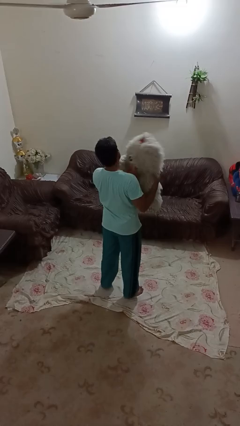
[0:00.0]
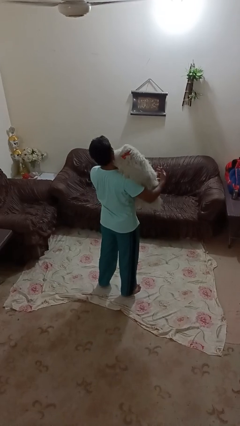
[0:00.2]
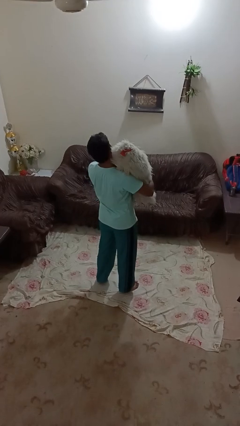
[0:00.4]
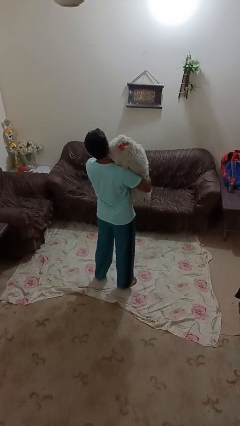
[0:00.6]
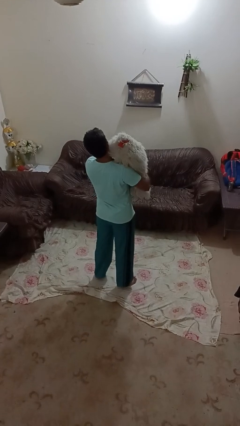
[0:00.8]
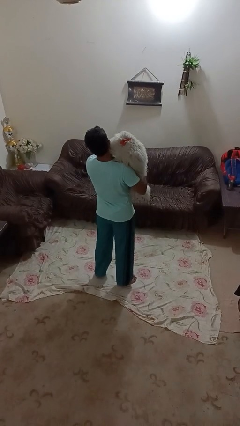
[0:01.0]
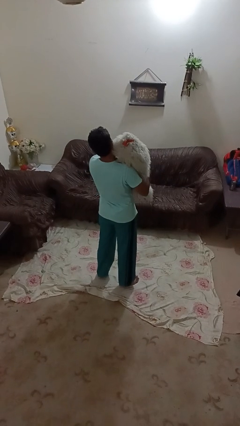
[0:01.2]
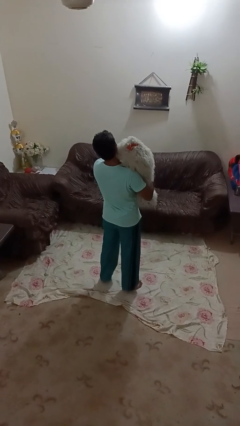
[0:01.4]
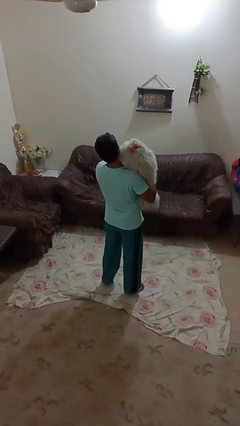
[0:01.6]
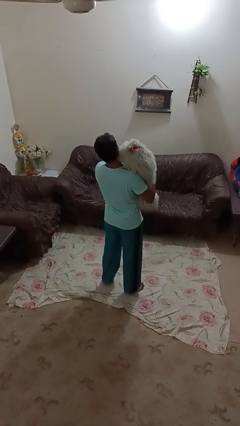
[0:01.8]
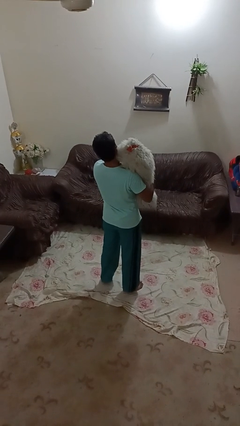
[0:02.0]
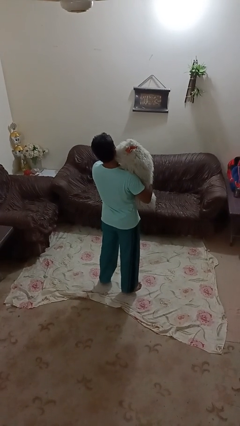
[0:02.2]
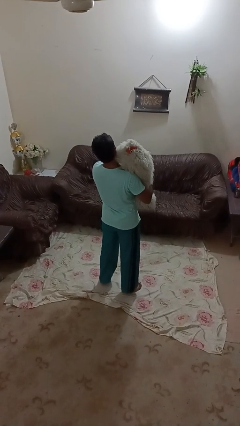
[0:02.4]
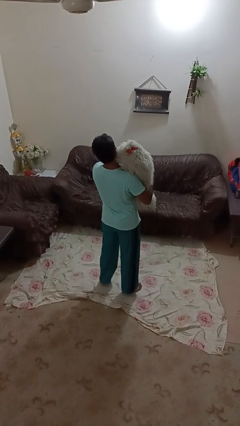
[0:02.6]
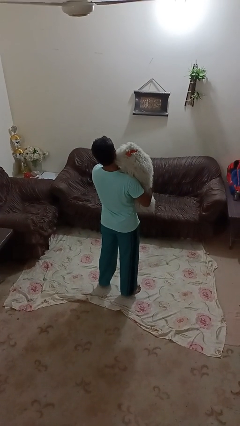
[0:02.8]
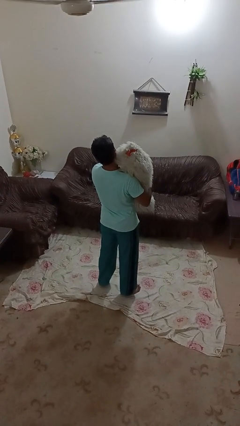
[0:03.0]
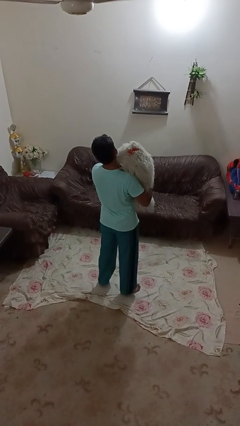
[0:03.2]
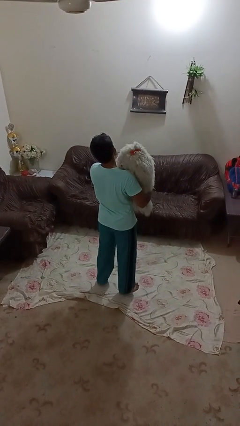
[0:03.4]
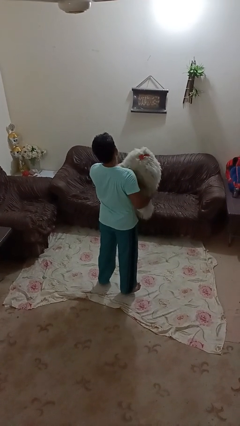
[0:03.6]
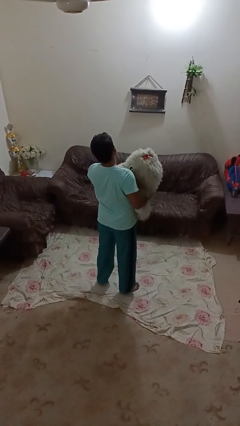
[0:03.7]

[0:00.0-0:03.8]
person hugs stuffed animal

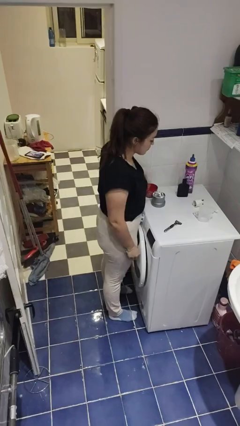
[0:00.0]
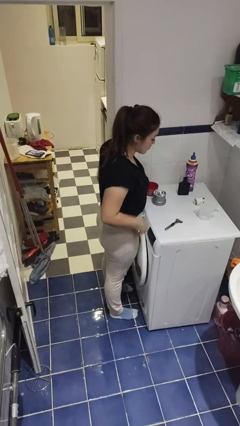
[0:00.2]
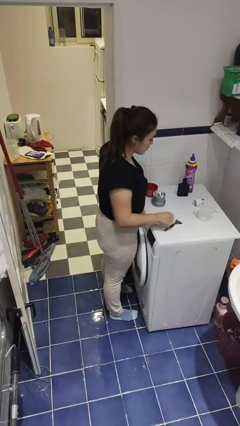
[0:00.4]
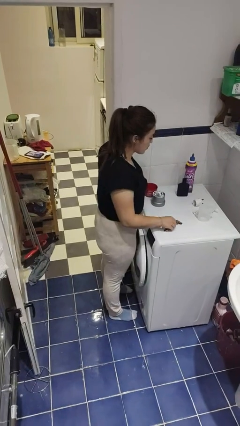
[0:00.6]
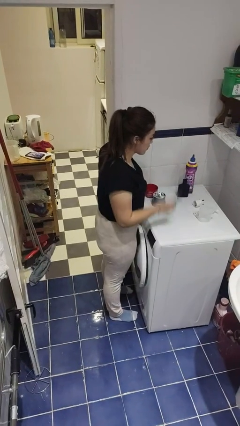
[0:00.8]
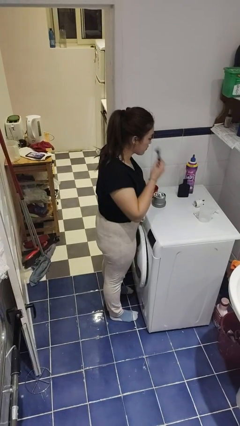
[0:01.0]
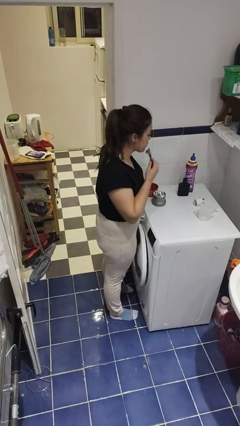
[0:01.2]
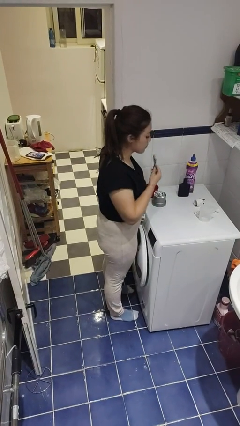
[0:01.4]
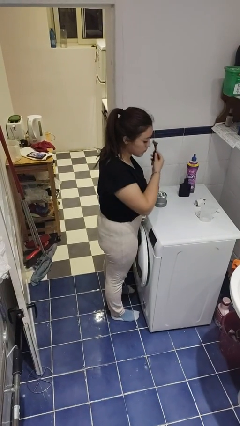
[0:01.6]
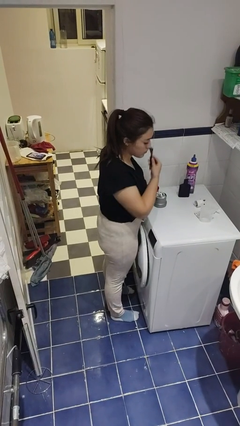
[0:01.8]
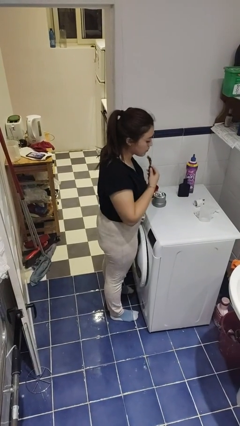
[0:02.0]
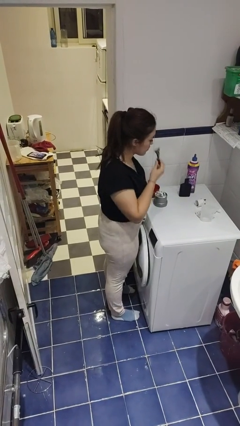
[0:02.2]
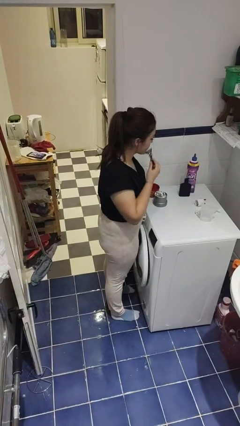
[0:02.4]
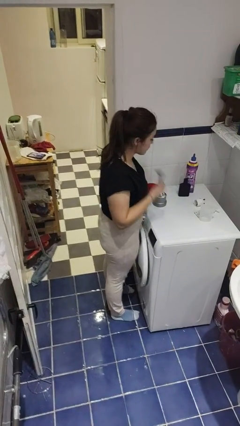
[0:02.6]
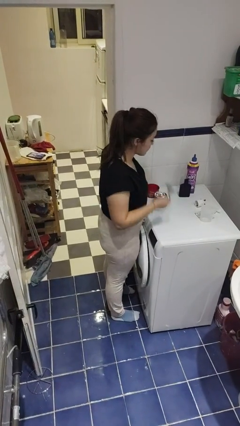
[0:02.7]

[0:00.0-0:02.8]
person shaves face

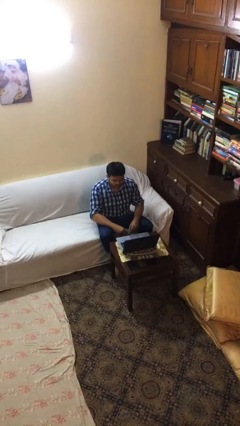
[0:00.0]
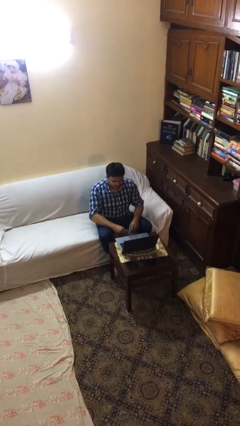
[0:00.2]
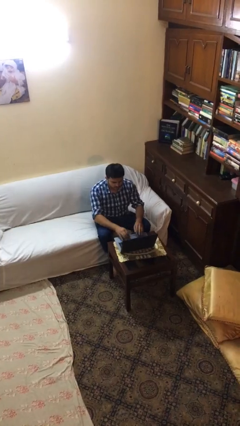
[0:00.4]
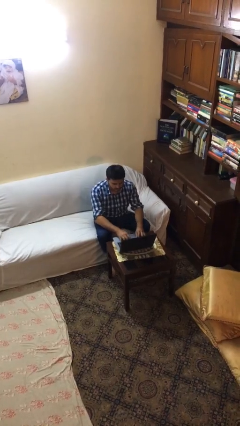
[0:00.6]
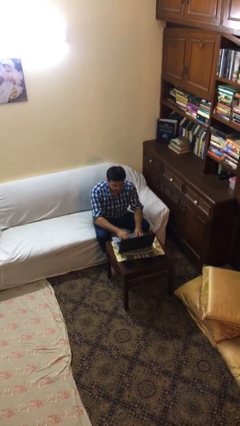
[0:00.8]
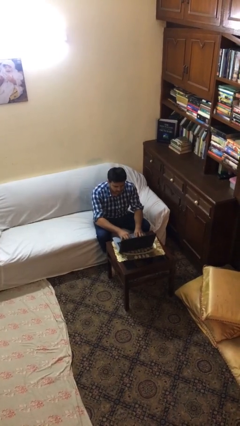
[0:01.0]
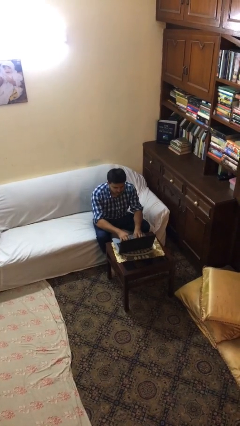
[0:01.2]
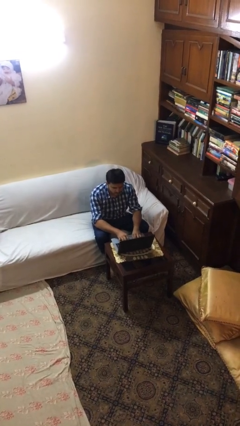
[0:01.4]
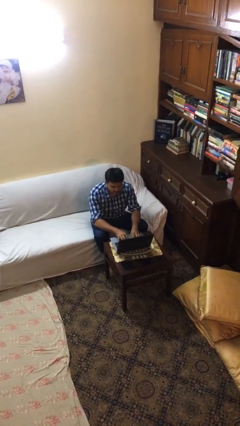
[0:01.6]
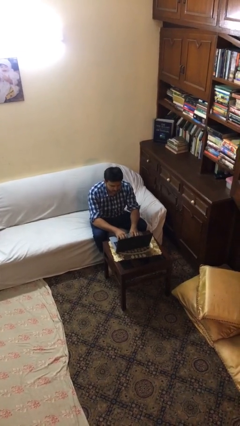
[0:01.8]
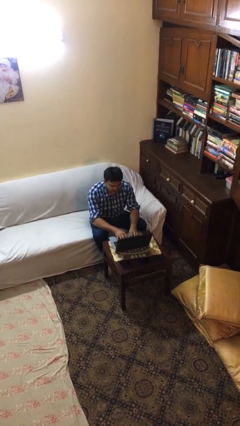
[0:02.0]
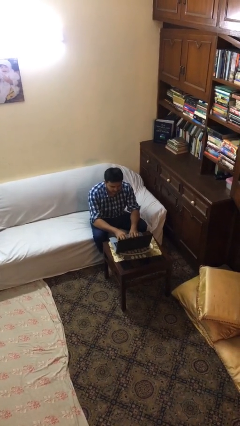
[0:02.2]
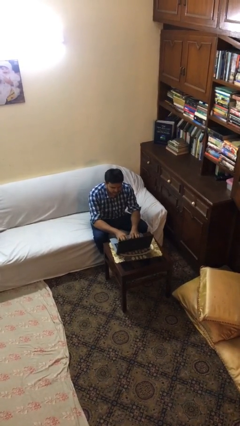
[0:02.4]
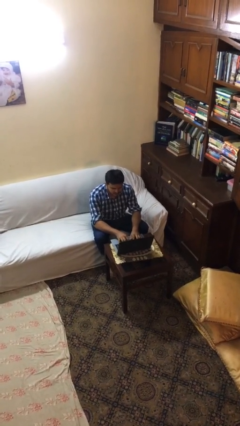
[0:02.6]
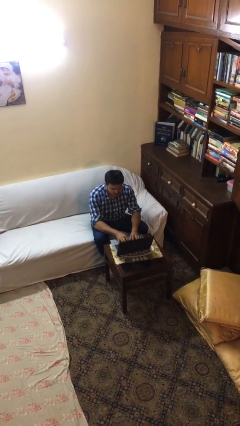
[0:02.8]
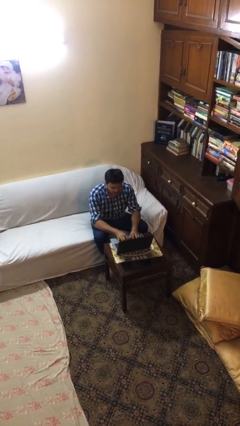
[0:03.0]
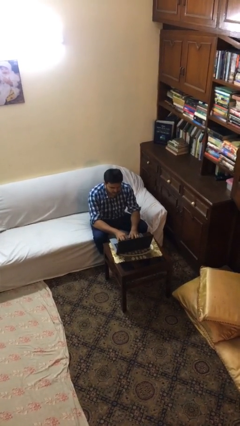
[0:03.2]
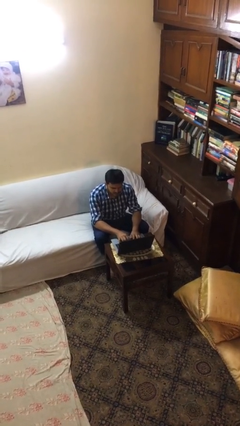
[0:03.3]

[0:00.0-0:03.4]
person interacts with laptop

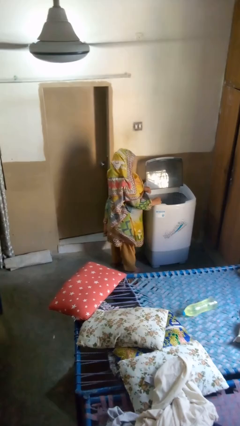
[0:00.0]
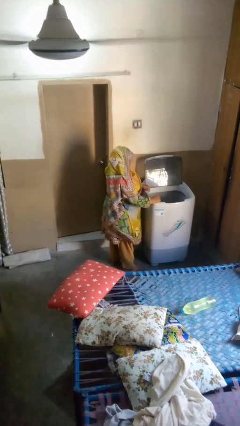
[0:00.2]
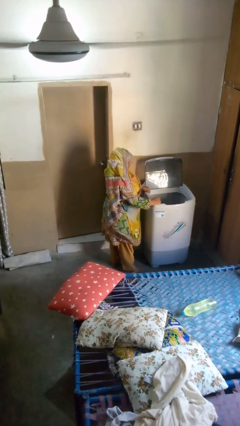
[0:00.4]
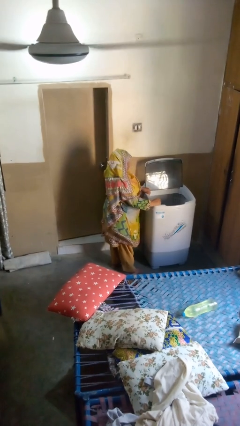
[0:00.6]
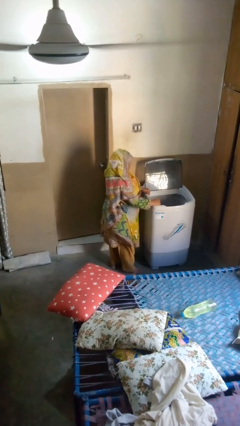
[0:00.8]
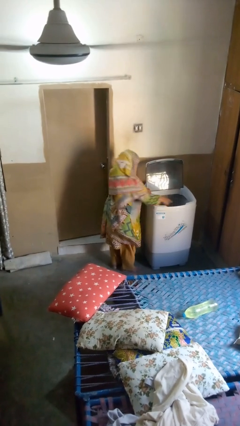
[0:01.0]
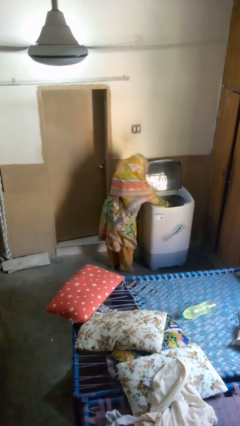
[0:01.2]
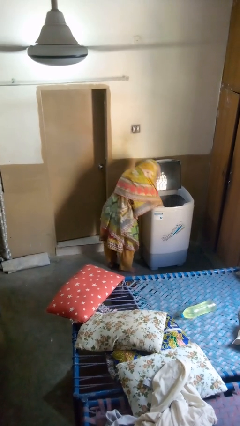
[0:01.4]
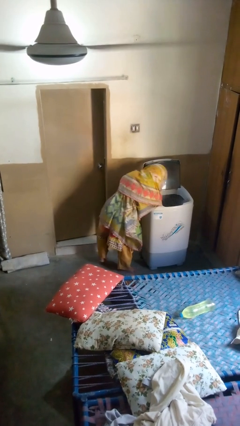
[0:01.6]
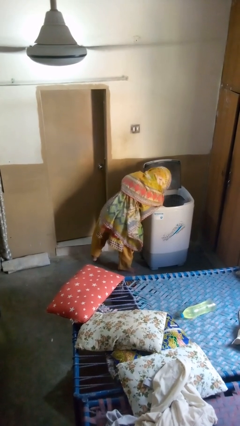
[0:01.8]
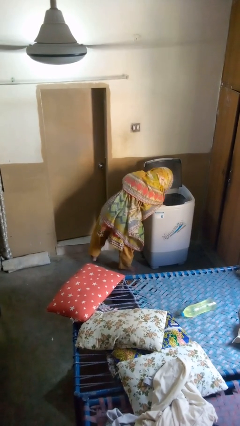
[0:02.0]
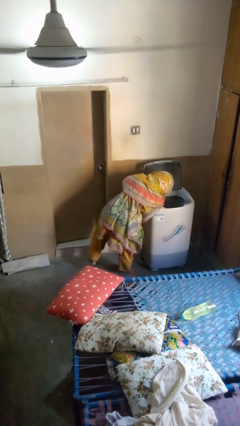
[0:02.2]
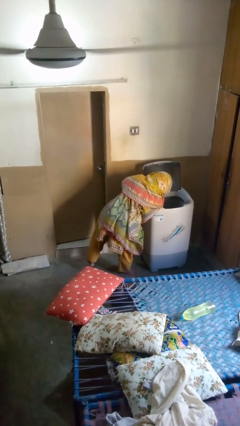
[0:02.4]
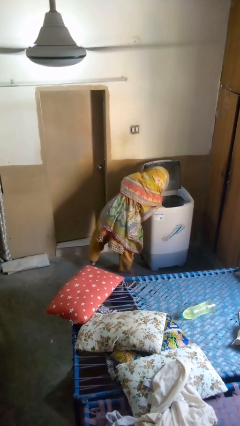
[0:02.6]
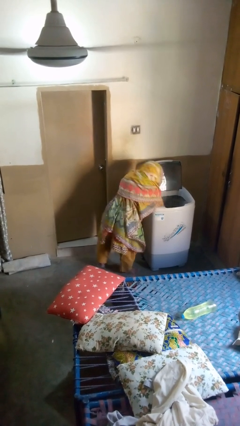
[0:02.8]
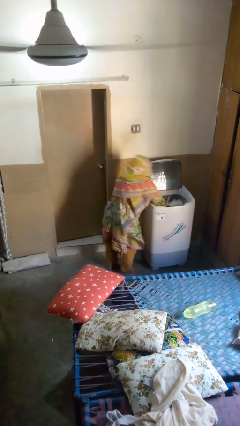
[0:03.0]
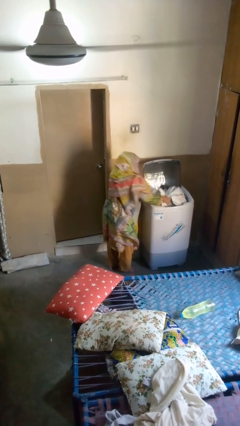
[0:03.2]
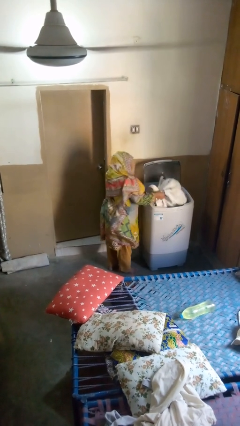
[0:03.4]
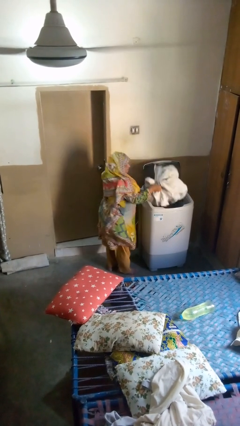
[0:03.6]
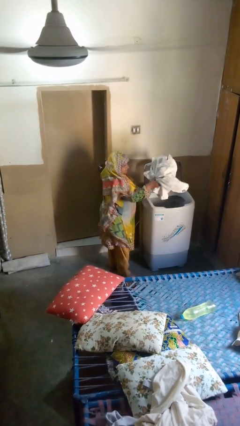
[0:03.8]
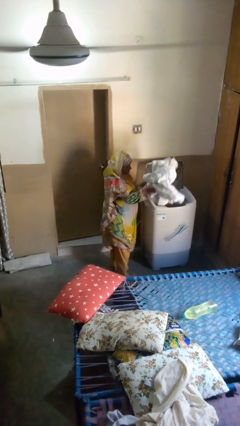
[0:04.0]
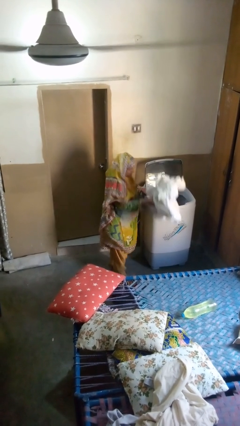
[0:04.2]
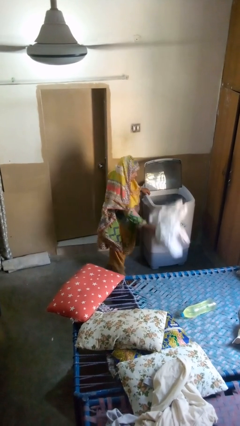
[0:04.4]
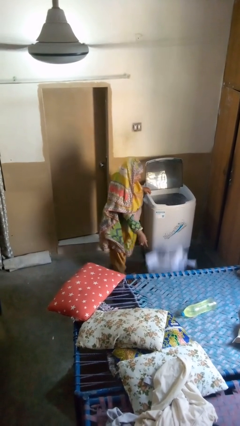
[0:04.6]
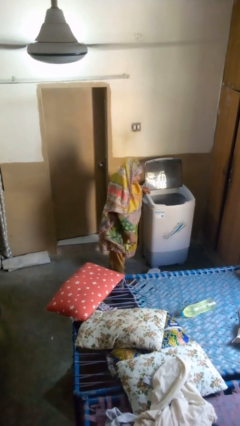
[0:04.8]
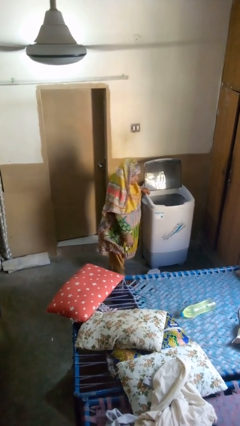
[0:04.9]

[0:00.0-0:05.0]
person unloads clotheswasher

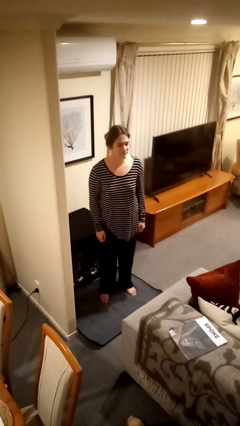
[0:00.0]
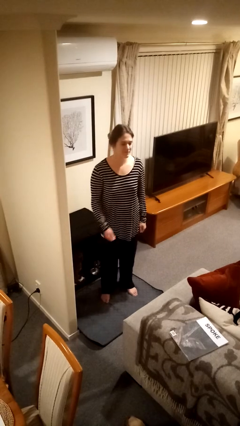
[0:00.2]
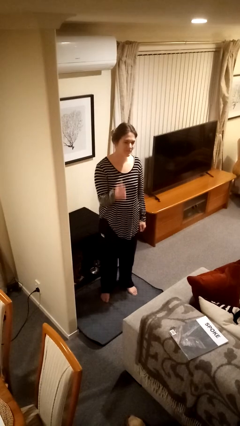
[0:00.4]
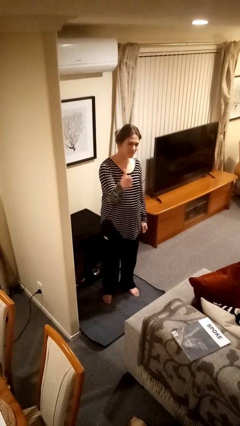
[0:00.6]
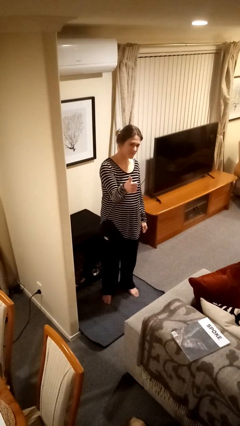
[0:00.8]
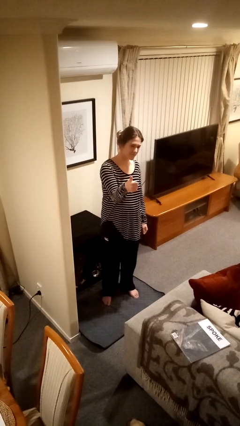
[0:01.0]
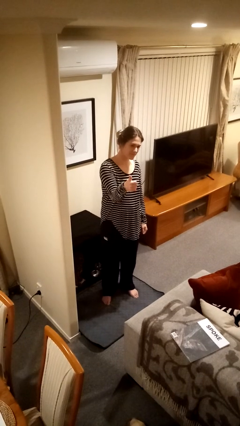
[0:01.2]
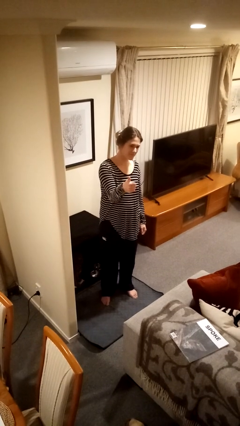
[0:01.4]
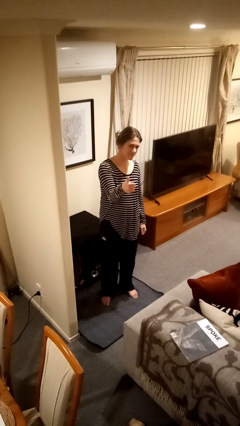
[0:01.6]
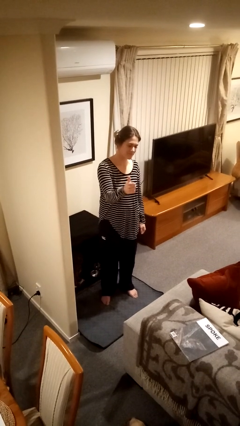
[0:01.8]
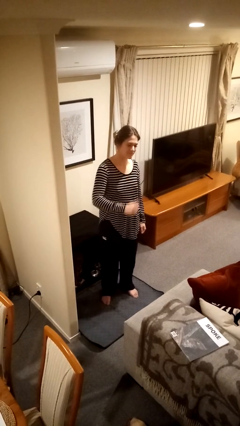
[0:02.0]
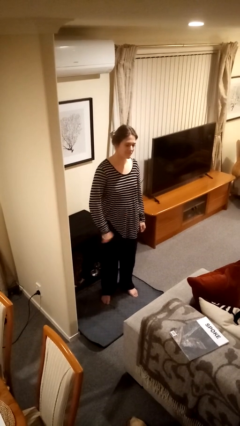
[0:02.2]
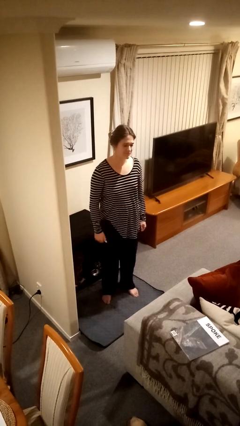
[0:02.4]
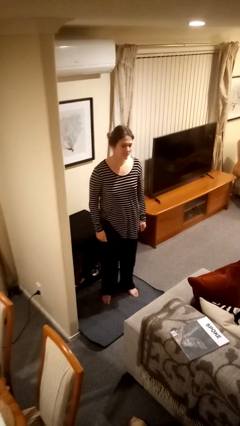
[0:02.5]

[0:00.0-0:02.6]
person gestures thumbs up
